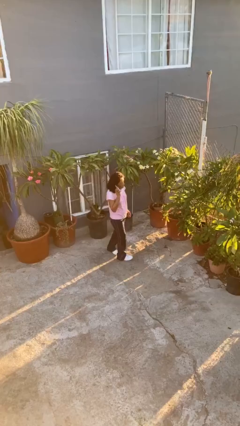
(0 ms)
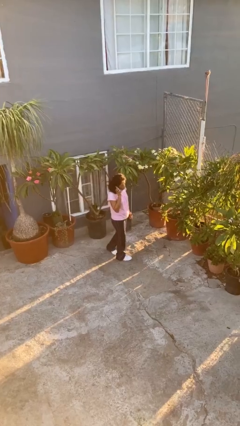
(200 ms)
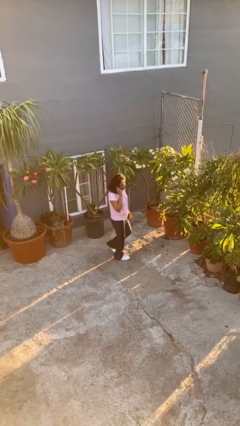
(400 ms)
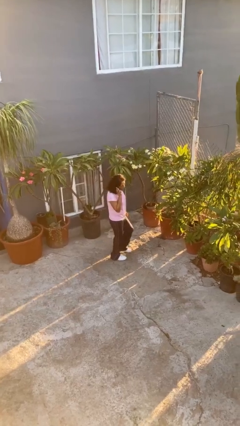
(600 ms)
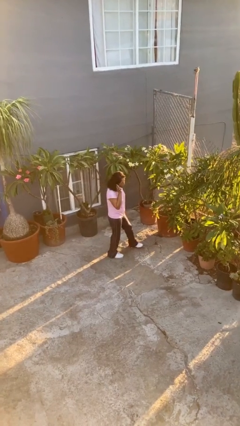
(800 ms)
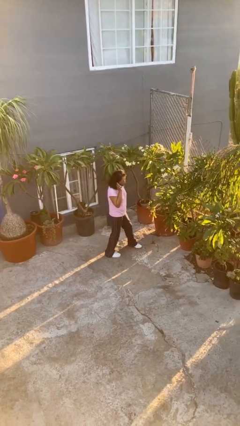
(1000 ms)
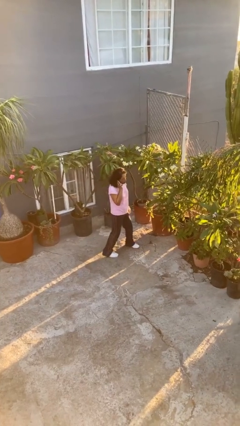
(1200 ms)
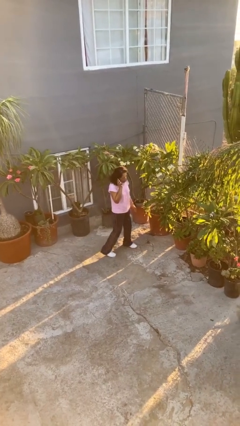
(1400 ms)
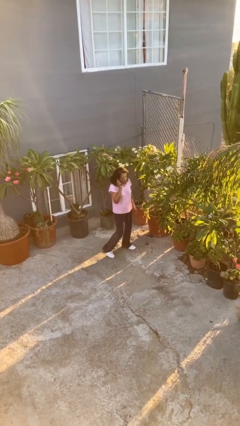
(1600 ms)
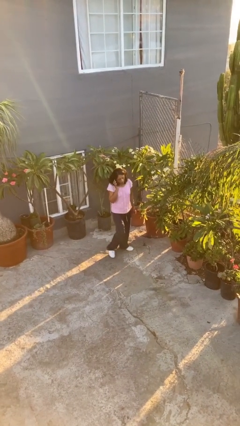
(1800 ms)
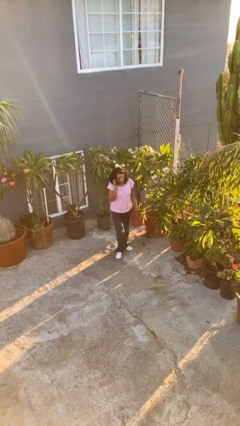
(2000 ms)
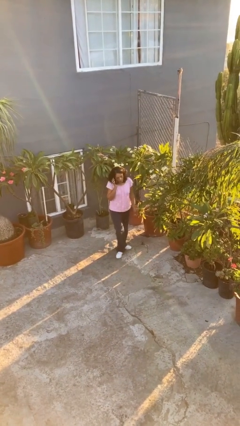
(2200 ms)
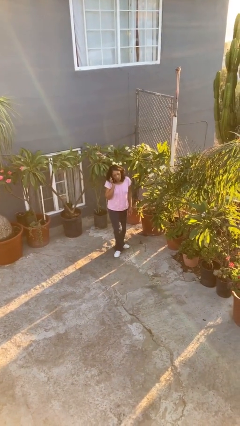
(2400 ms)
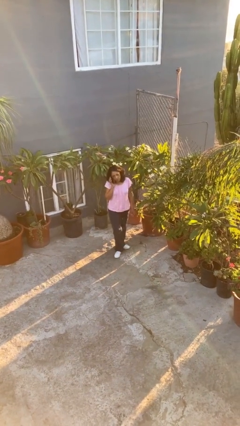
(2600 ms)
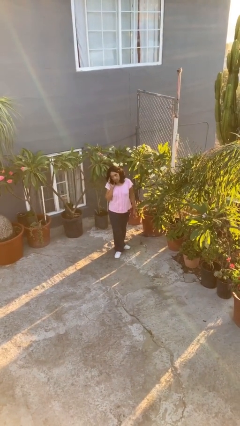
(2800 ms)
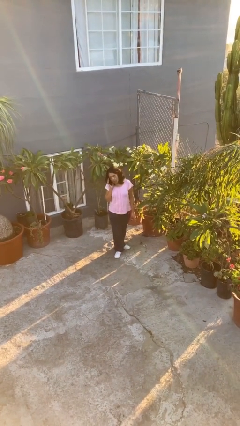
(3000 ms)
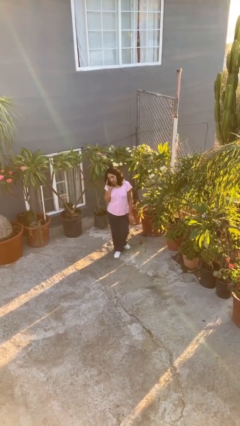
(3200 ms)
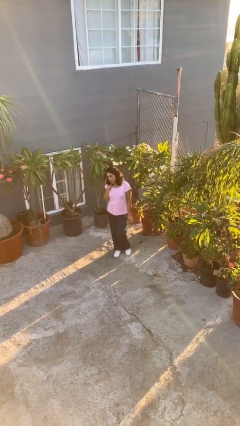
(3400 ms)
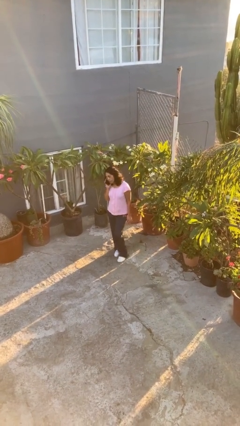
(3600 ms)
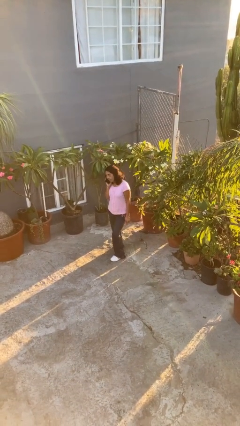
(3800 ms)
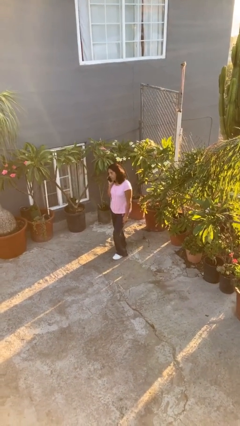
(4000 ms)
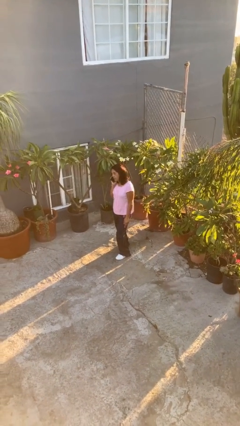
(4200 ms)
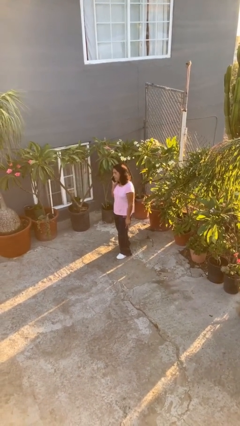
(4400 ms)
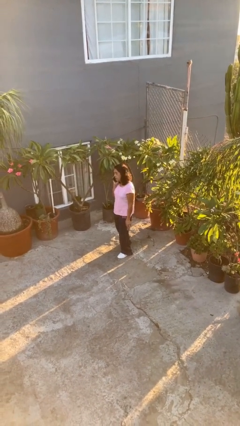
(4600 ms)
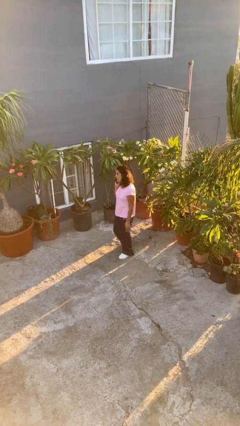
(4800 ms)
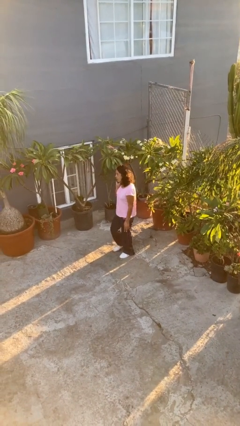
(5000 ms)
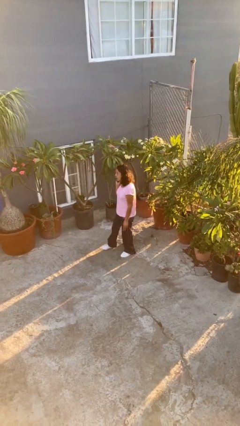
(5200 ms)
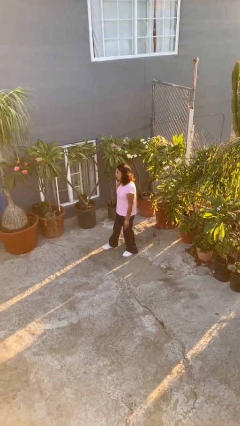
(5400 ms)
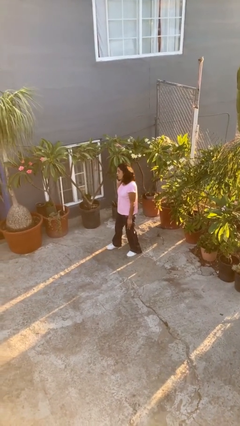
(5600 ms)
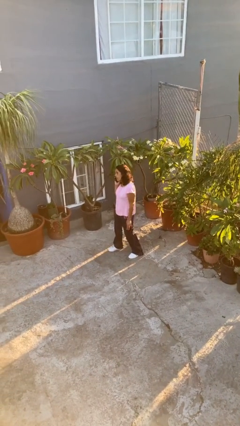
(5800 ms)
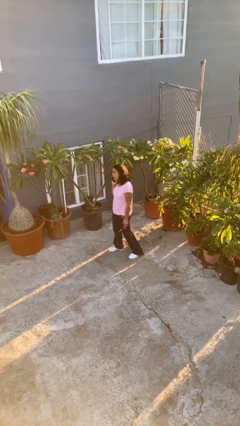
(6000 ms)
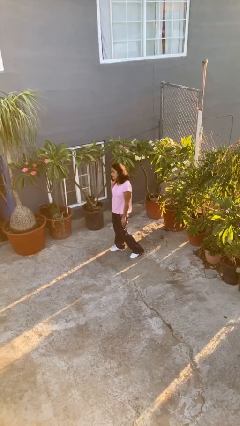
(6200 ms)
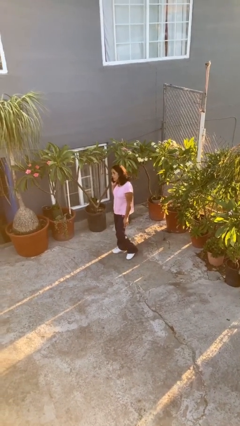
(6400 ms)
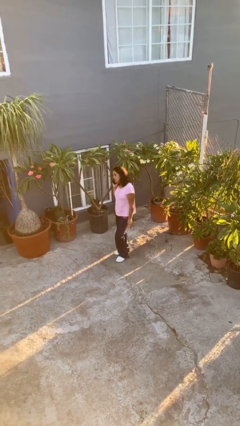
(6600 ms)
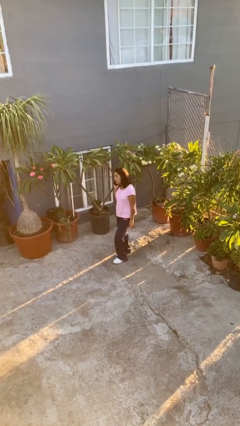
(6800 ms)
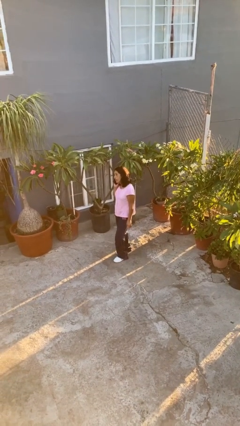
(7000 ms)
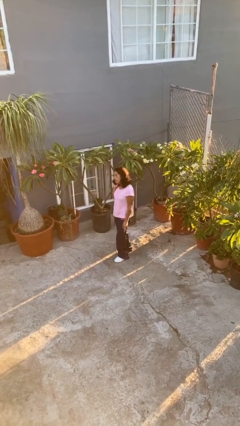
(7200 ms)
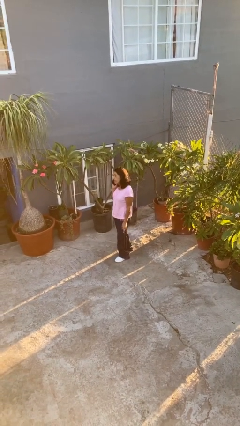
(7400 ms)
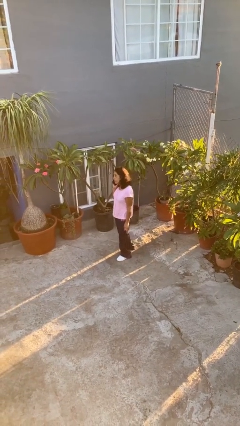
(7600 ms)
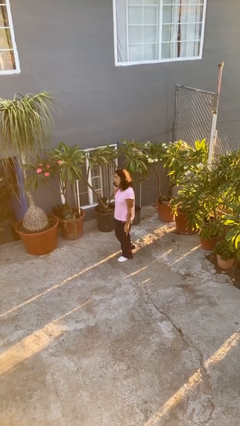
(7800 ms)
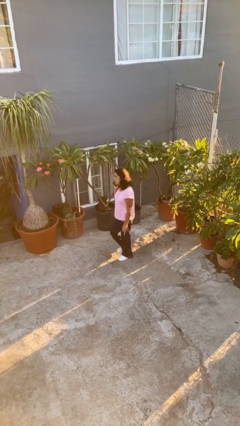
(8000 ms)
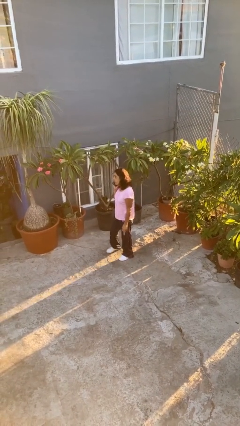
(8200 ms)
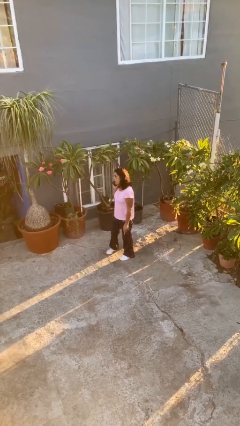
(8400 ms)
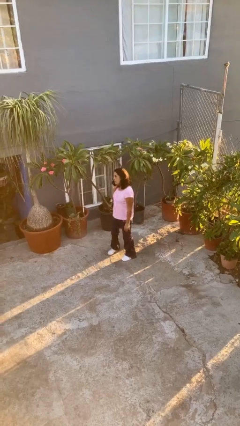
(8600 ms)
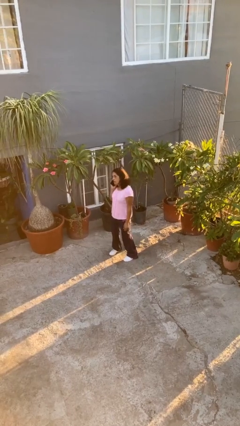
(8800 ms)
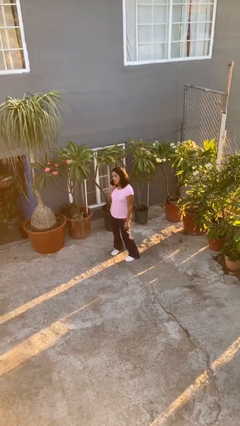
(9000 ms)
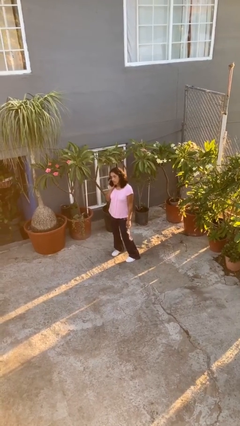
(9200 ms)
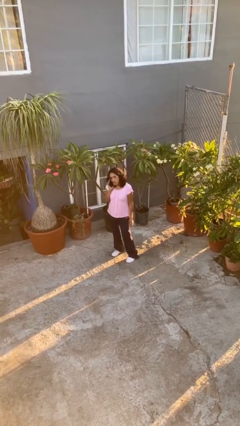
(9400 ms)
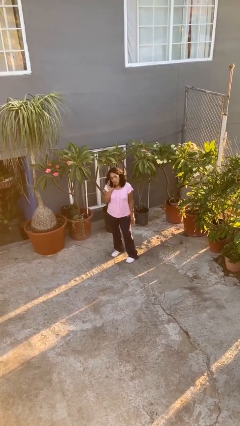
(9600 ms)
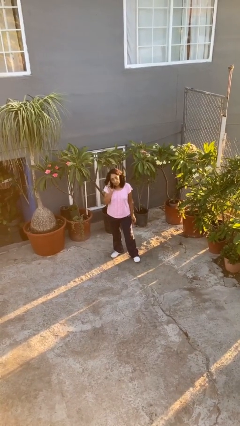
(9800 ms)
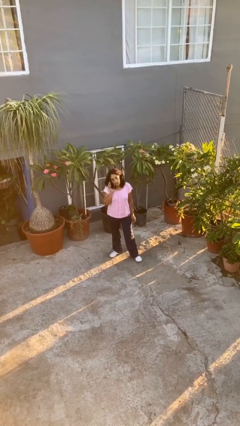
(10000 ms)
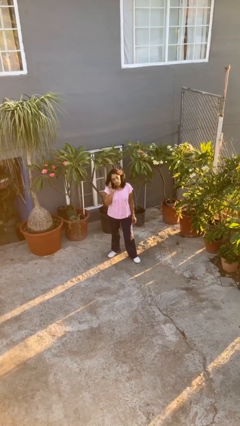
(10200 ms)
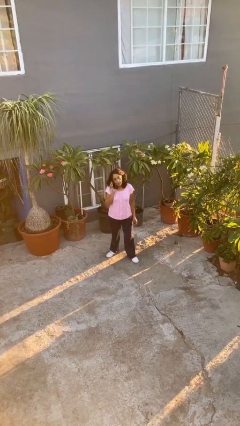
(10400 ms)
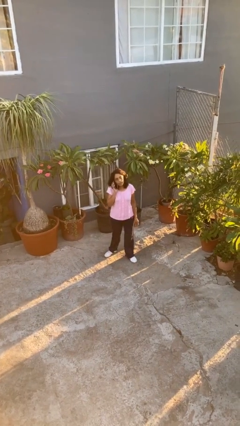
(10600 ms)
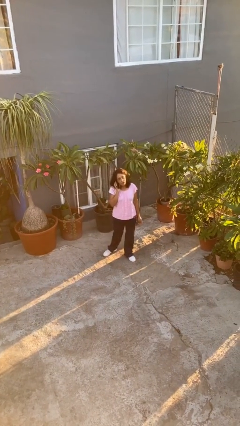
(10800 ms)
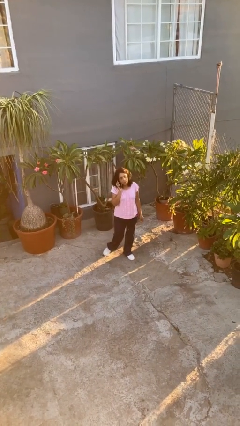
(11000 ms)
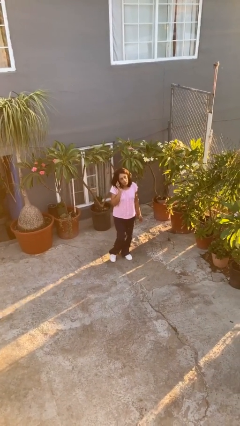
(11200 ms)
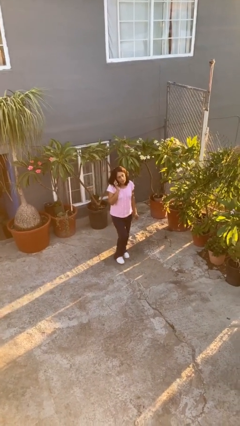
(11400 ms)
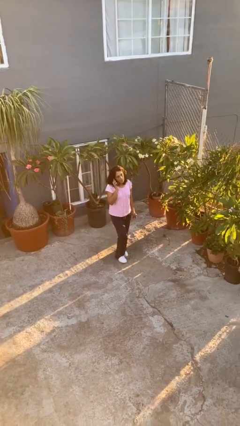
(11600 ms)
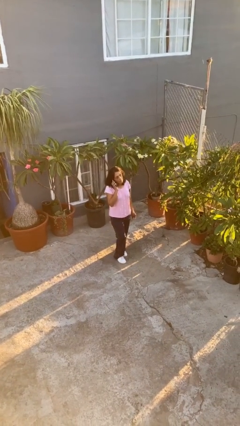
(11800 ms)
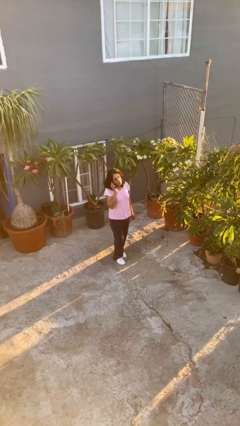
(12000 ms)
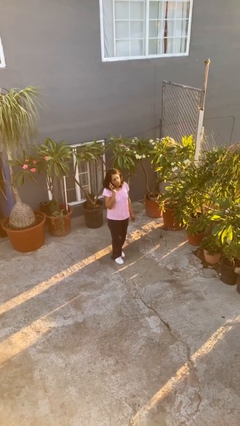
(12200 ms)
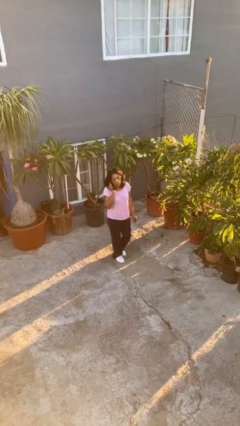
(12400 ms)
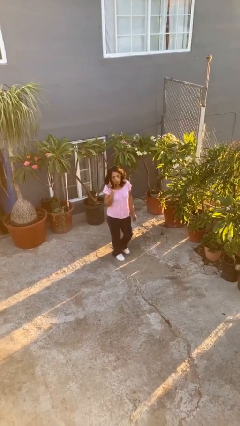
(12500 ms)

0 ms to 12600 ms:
person talks on phone

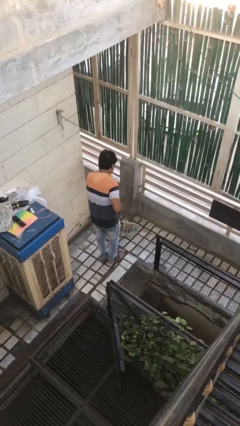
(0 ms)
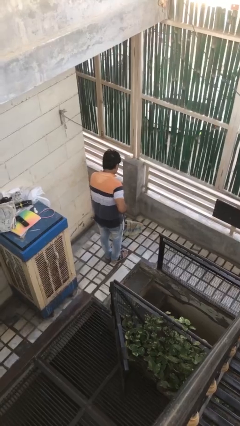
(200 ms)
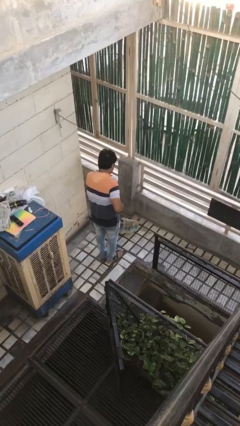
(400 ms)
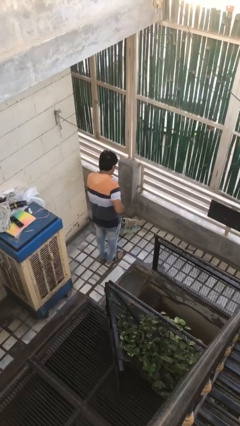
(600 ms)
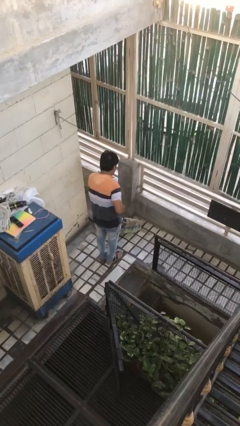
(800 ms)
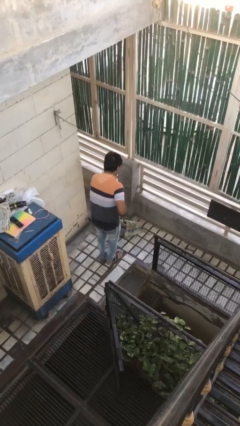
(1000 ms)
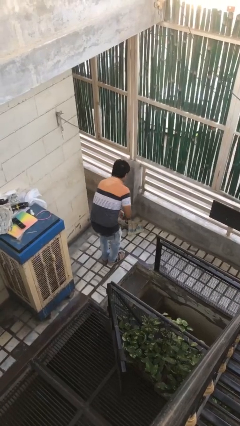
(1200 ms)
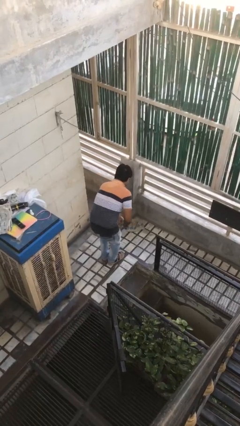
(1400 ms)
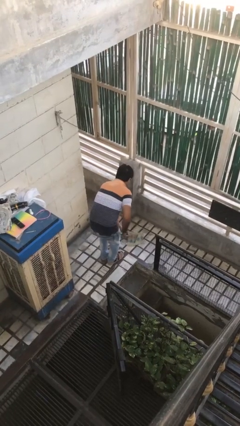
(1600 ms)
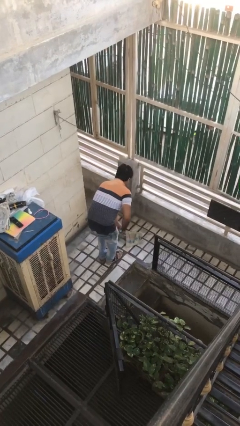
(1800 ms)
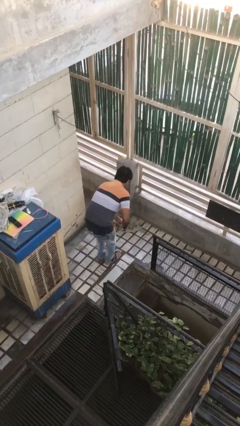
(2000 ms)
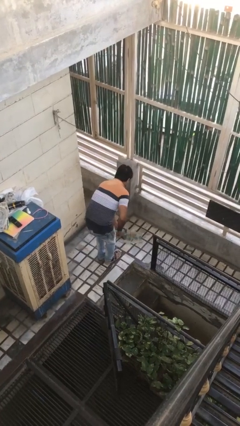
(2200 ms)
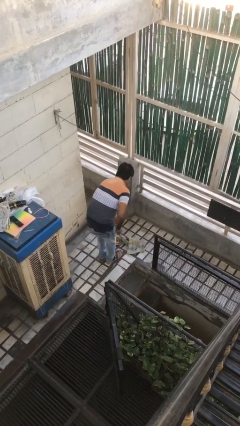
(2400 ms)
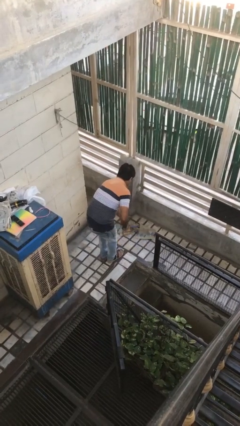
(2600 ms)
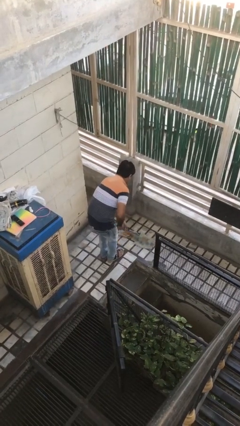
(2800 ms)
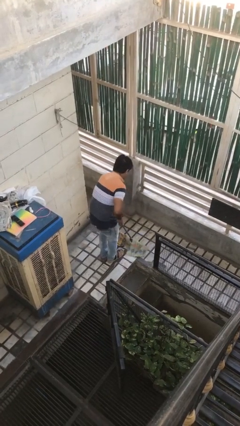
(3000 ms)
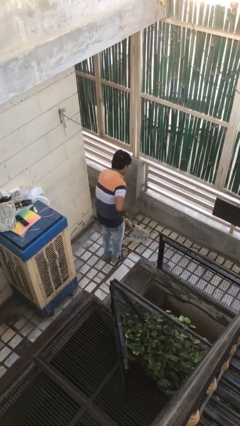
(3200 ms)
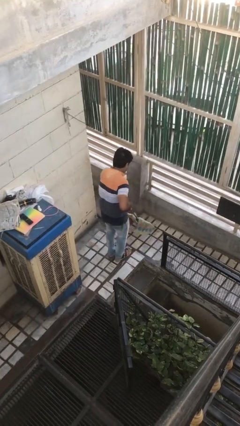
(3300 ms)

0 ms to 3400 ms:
person mops

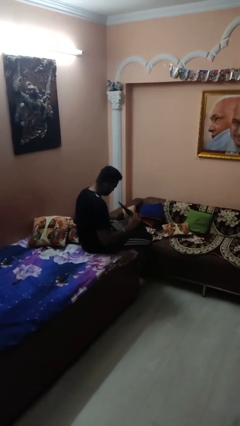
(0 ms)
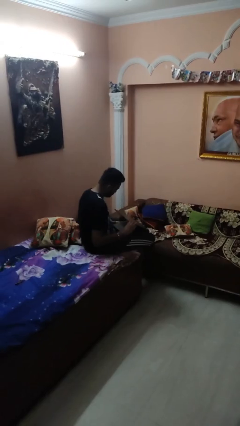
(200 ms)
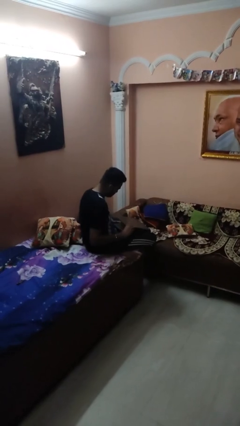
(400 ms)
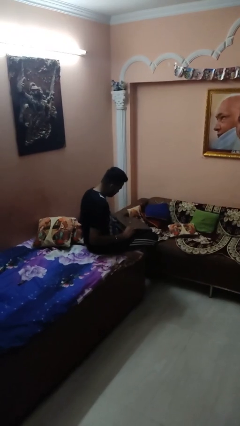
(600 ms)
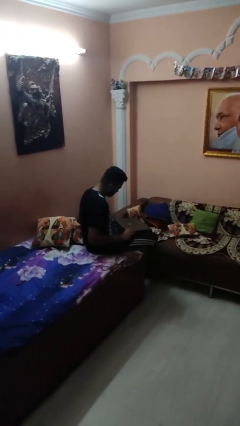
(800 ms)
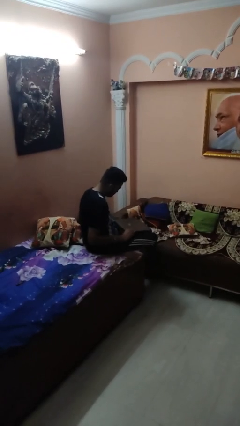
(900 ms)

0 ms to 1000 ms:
person closes laptop

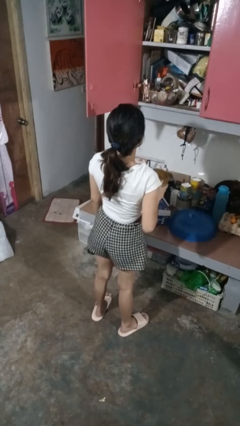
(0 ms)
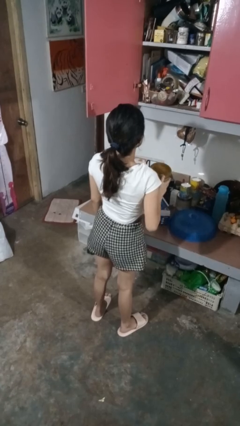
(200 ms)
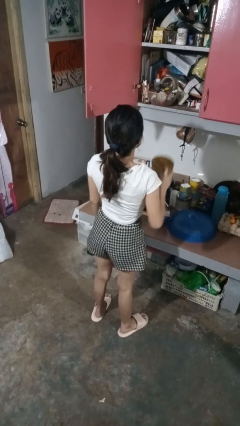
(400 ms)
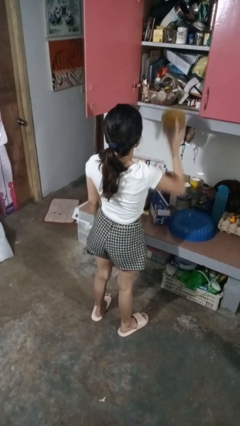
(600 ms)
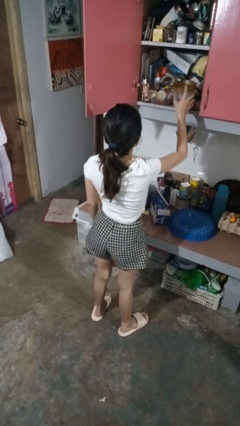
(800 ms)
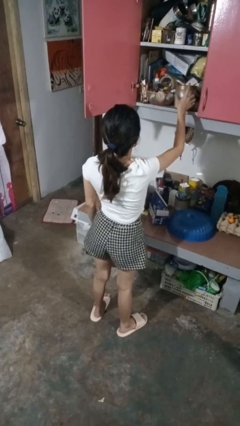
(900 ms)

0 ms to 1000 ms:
person puts down object into cabinet
